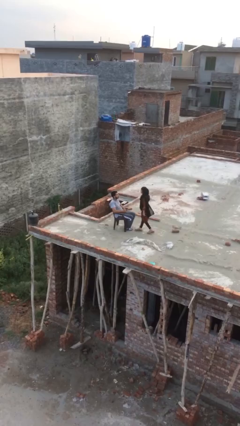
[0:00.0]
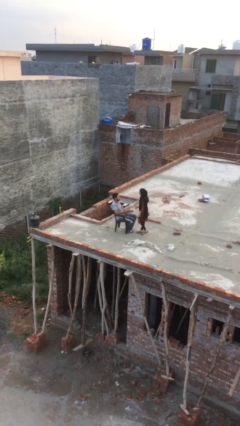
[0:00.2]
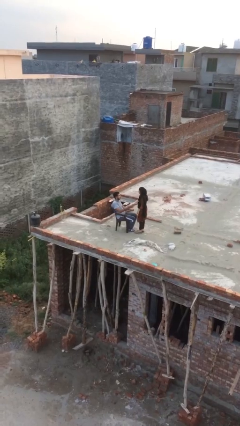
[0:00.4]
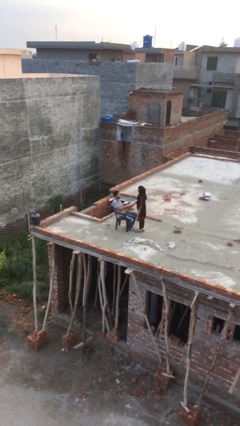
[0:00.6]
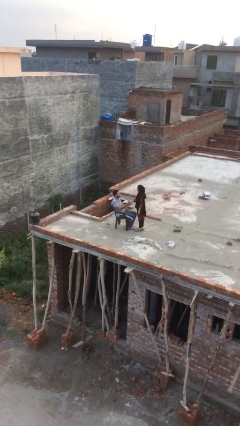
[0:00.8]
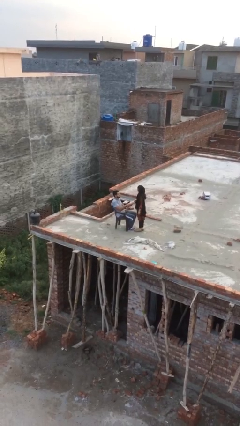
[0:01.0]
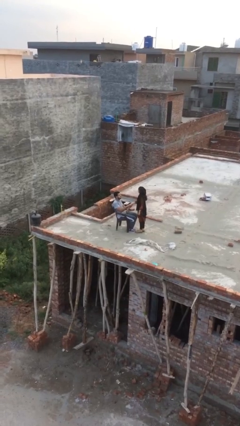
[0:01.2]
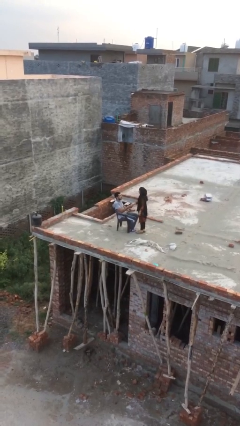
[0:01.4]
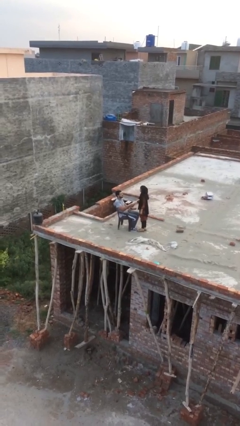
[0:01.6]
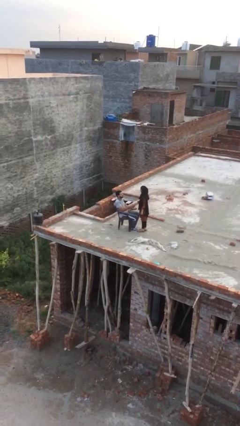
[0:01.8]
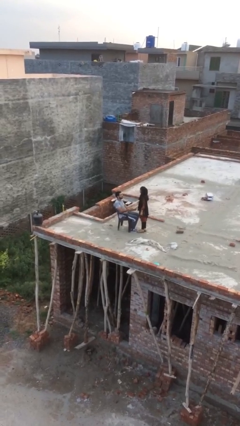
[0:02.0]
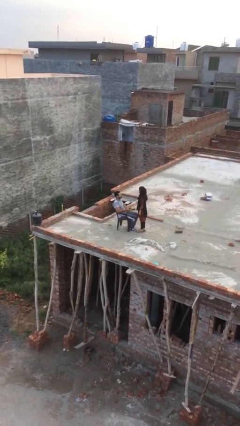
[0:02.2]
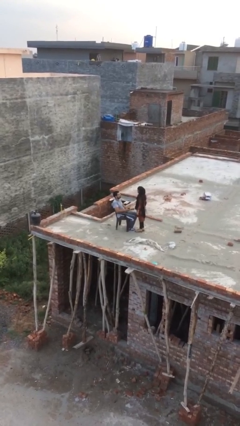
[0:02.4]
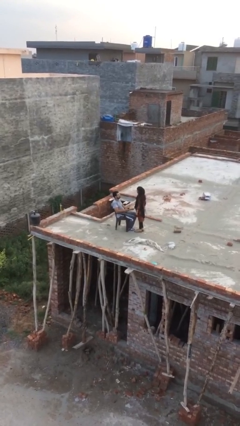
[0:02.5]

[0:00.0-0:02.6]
person shakes hand

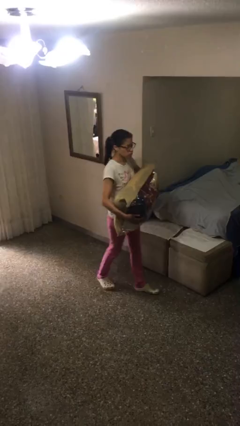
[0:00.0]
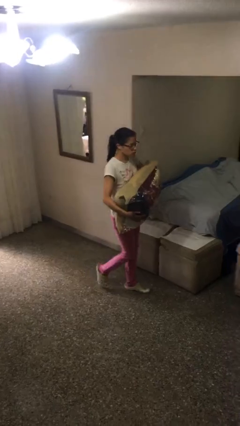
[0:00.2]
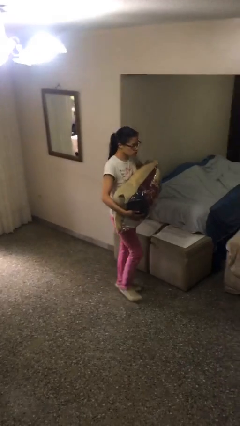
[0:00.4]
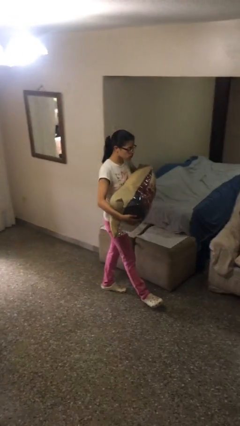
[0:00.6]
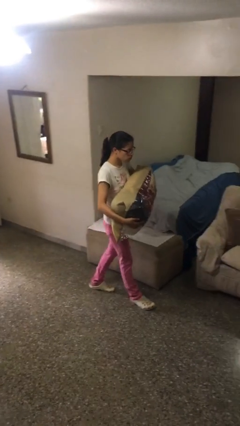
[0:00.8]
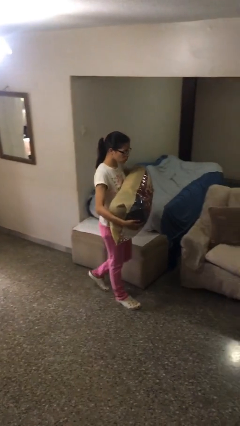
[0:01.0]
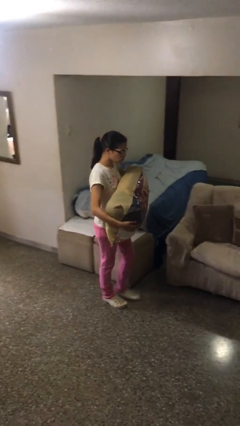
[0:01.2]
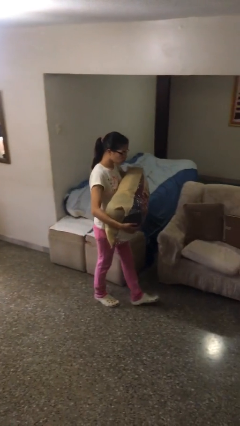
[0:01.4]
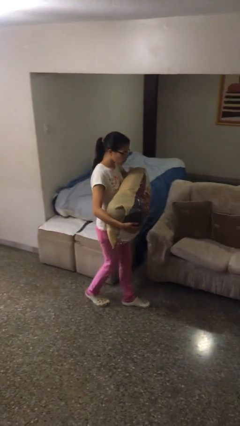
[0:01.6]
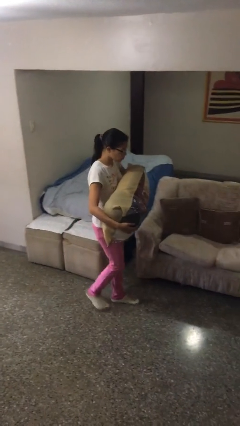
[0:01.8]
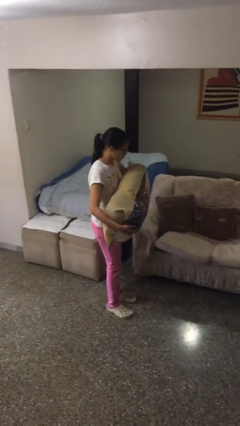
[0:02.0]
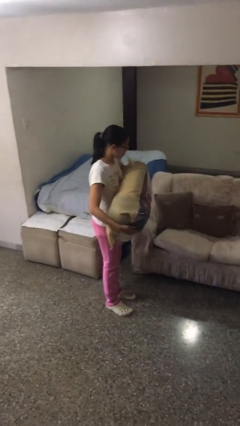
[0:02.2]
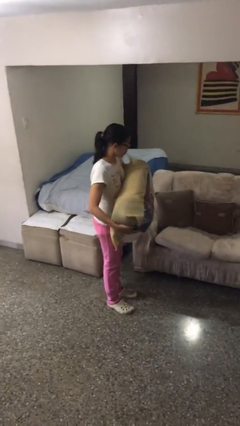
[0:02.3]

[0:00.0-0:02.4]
person carries heavy object

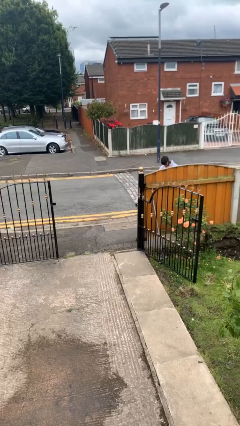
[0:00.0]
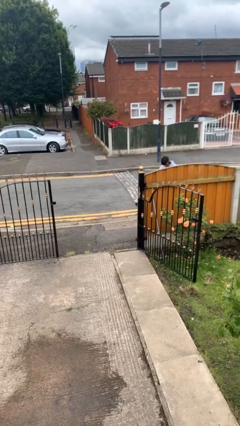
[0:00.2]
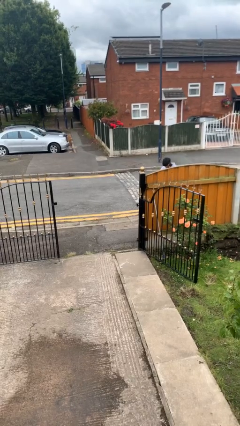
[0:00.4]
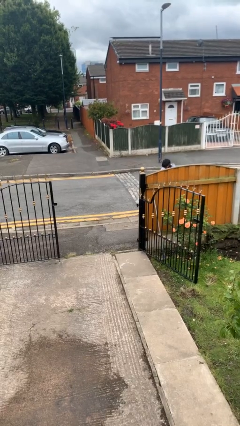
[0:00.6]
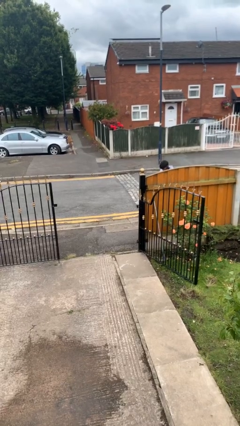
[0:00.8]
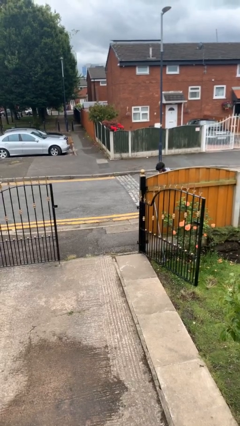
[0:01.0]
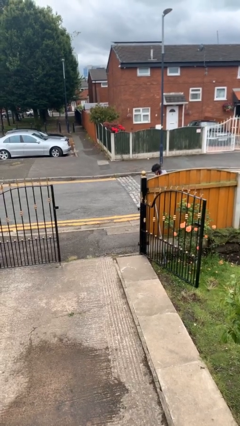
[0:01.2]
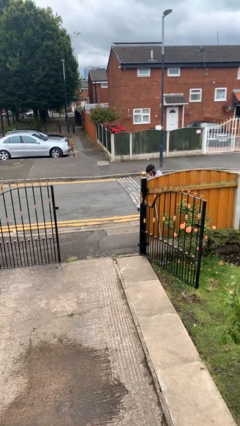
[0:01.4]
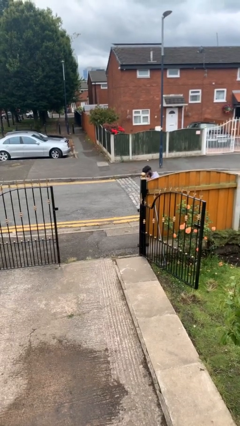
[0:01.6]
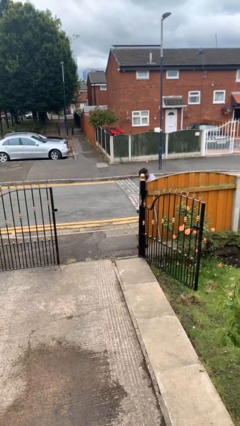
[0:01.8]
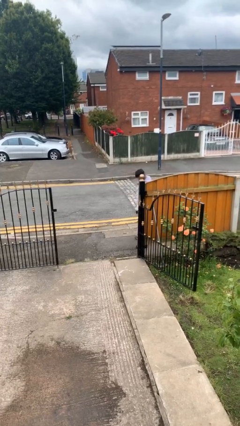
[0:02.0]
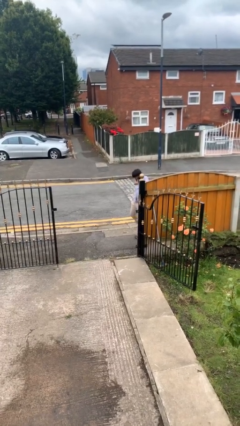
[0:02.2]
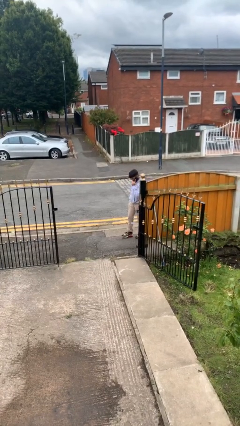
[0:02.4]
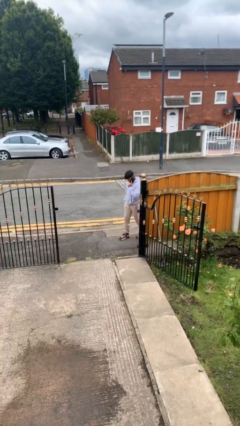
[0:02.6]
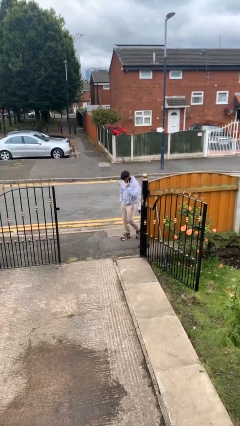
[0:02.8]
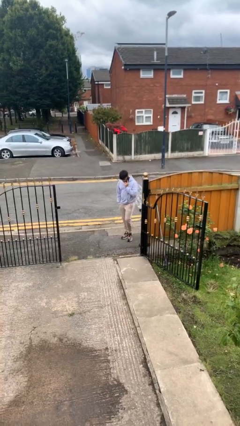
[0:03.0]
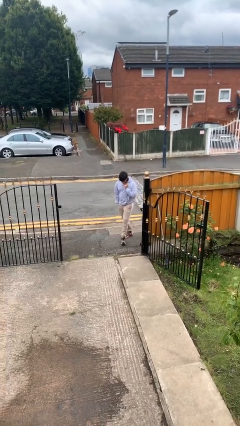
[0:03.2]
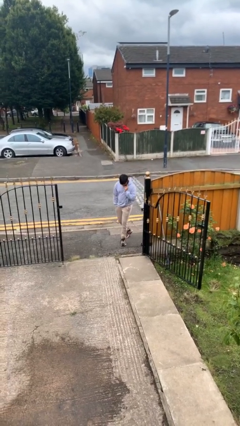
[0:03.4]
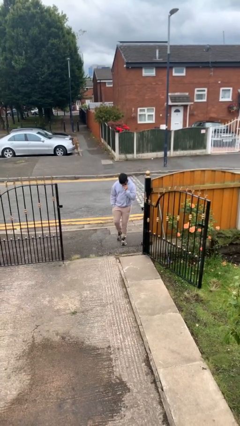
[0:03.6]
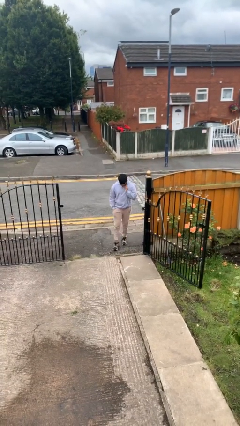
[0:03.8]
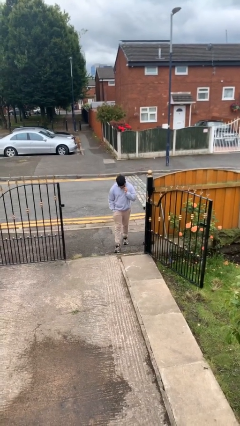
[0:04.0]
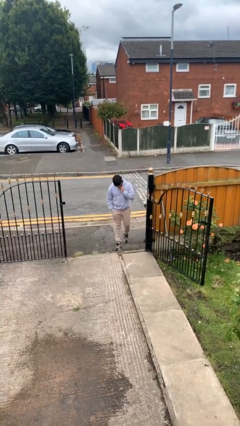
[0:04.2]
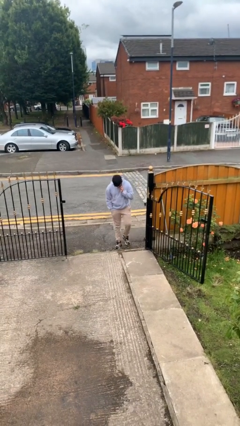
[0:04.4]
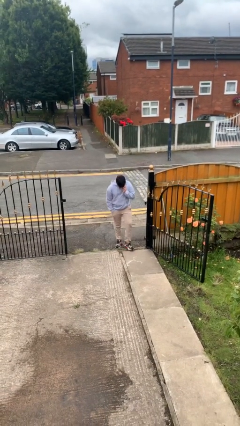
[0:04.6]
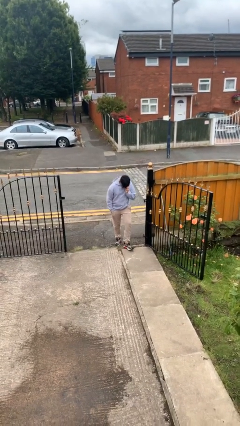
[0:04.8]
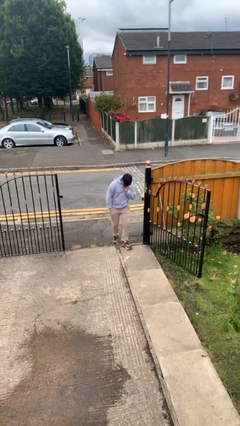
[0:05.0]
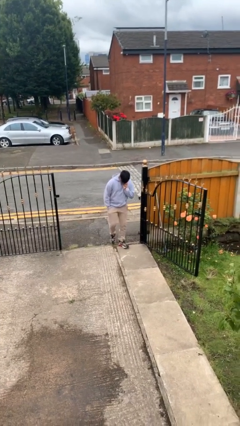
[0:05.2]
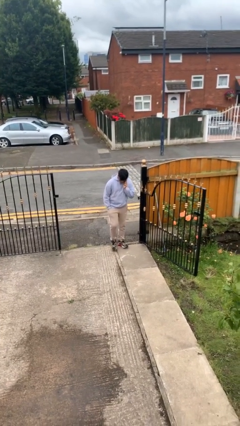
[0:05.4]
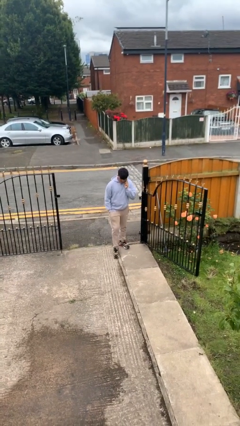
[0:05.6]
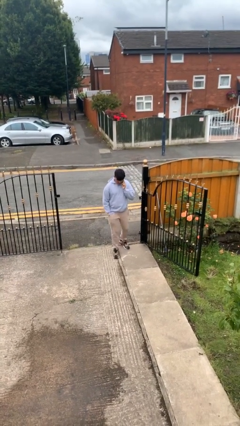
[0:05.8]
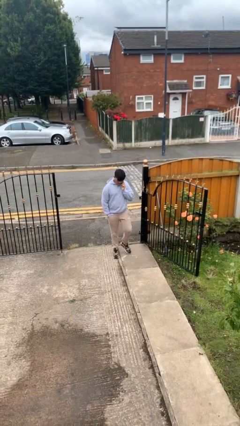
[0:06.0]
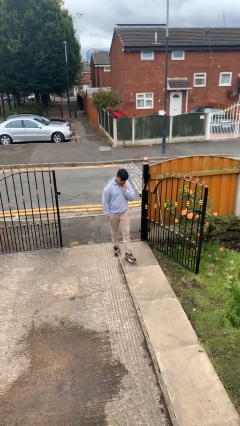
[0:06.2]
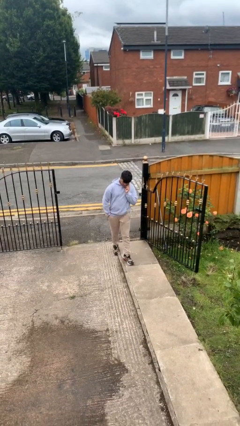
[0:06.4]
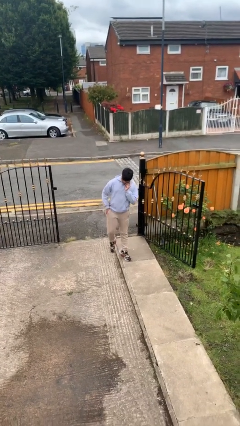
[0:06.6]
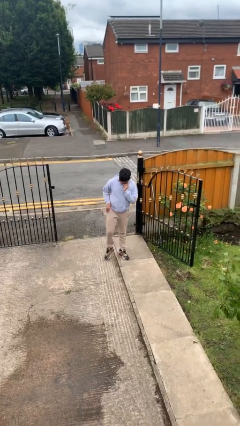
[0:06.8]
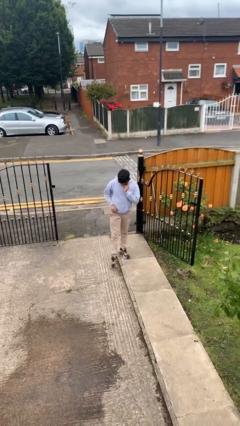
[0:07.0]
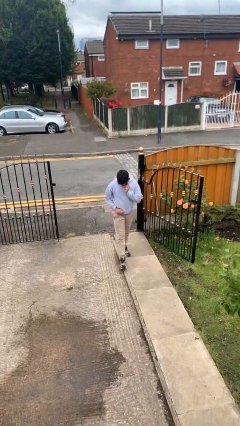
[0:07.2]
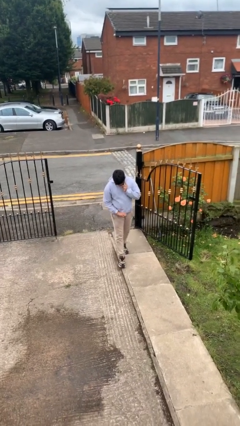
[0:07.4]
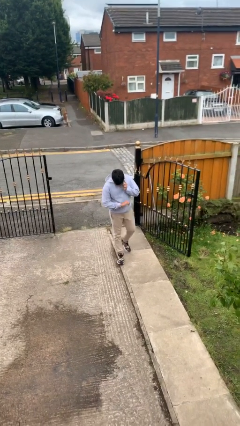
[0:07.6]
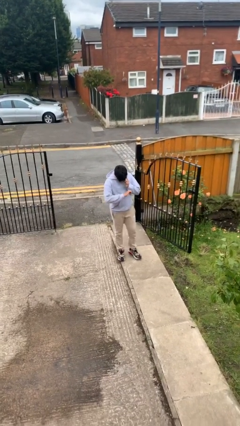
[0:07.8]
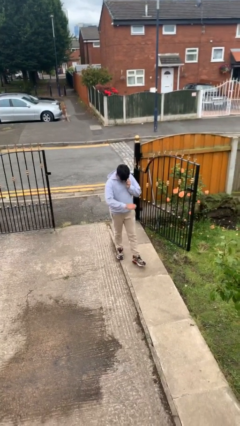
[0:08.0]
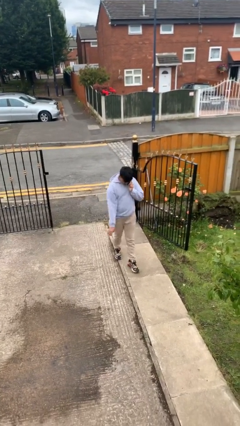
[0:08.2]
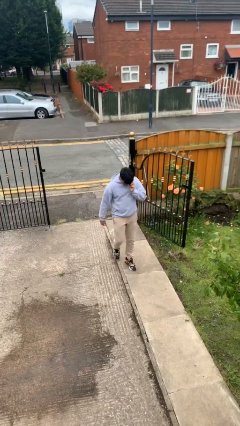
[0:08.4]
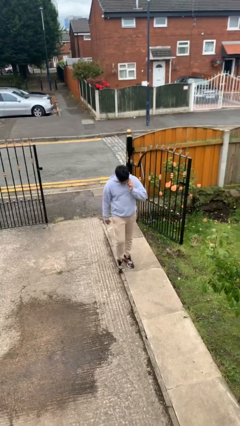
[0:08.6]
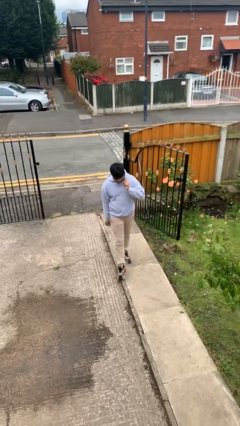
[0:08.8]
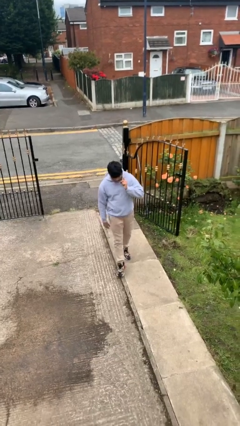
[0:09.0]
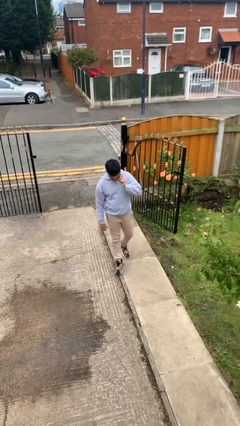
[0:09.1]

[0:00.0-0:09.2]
person enters scene through structure

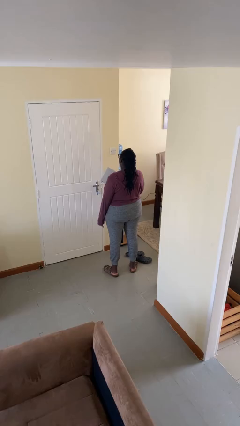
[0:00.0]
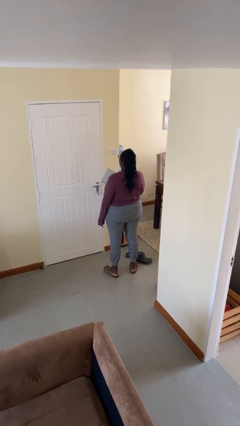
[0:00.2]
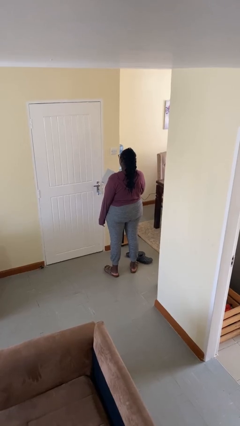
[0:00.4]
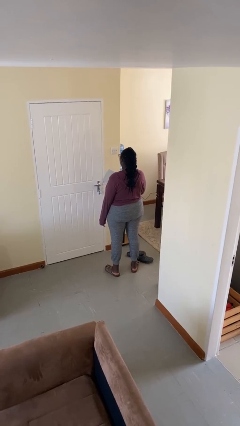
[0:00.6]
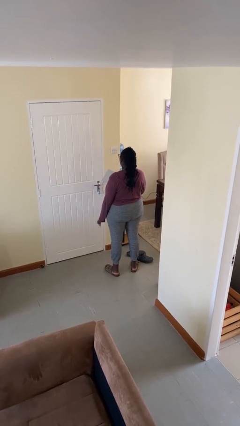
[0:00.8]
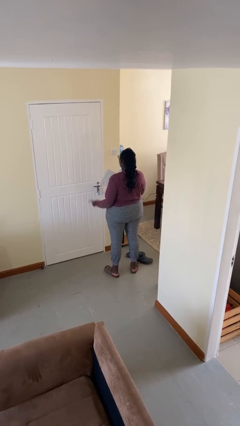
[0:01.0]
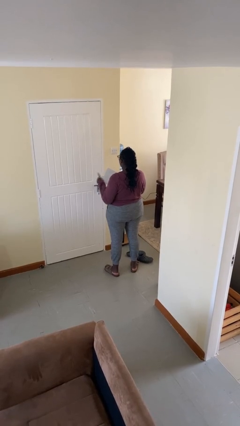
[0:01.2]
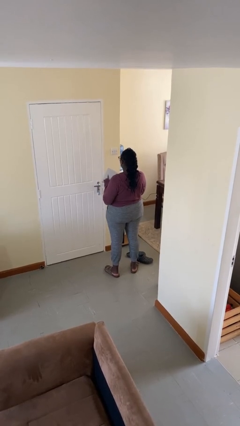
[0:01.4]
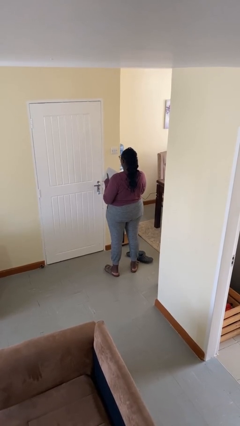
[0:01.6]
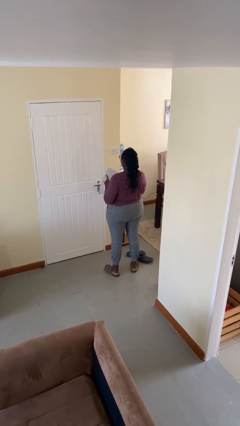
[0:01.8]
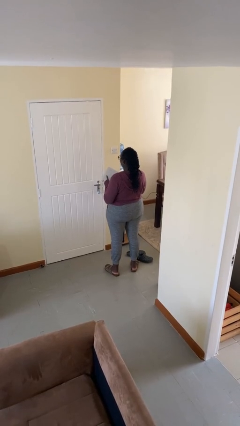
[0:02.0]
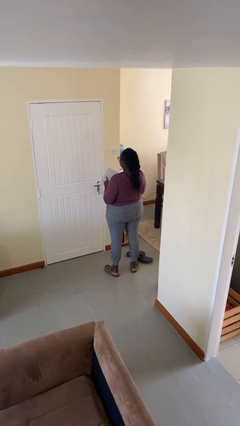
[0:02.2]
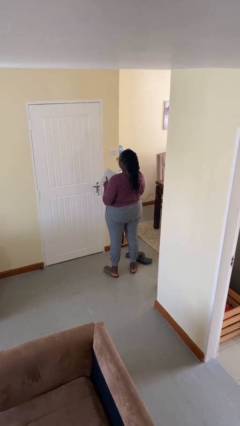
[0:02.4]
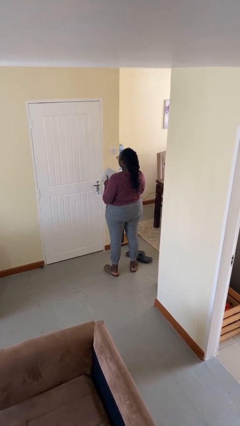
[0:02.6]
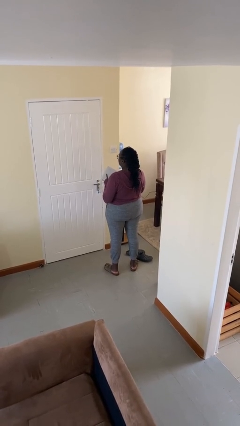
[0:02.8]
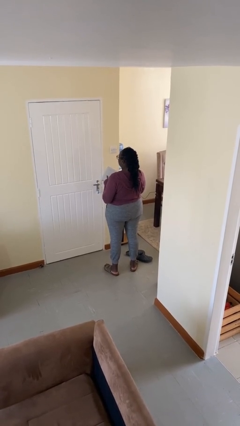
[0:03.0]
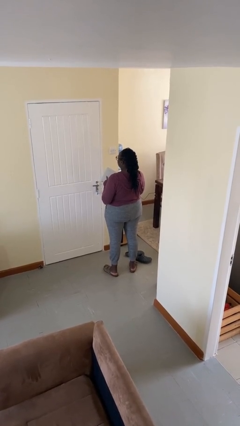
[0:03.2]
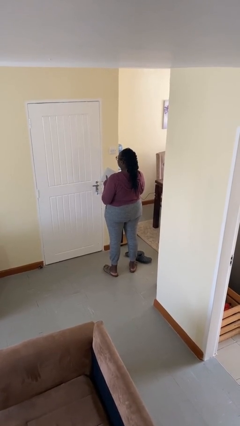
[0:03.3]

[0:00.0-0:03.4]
person taps object with finger
